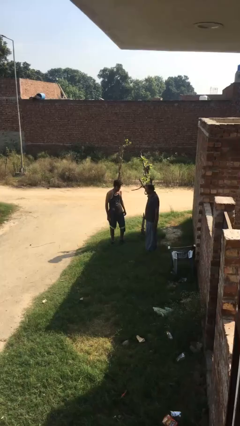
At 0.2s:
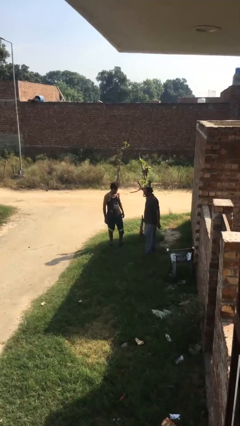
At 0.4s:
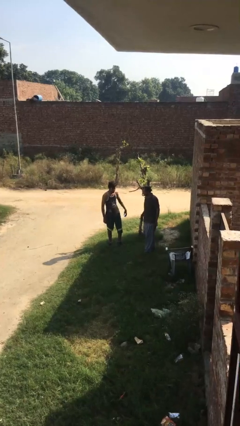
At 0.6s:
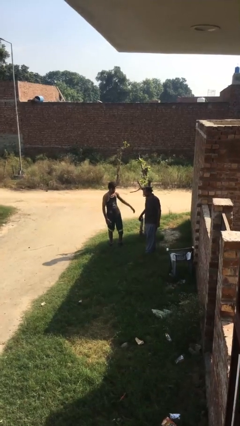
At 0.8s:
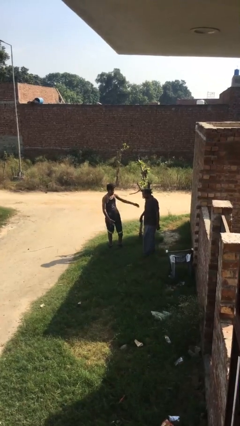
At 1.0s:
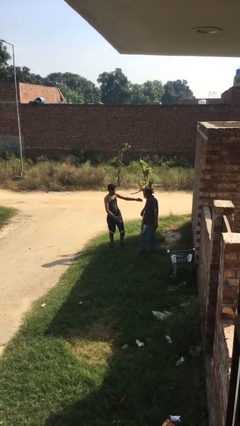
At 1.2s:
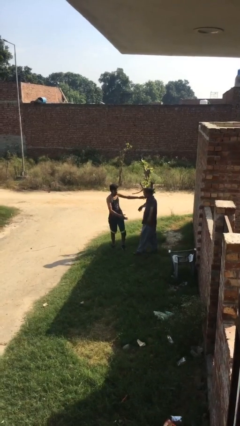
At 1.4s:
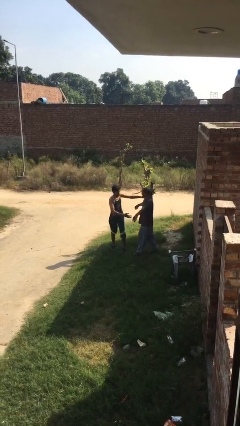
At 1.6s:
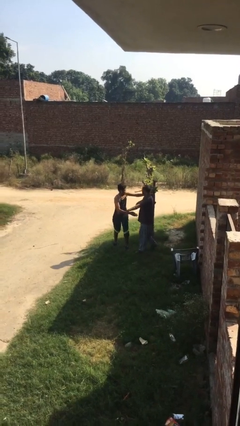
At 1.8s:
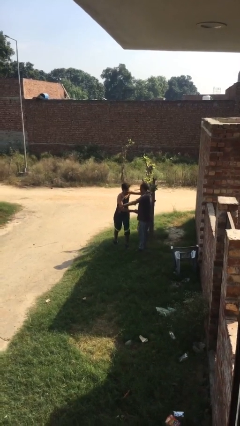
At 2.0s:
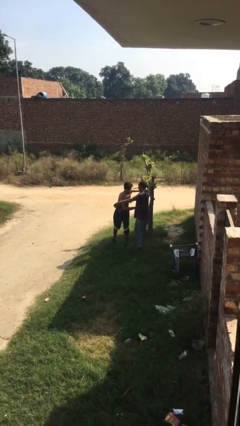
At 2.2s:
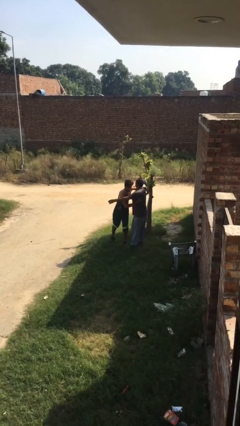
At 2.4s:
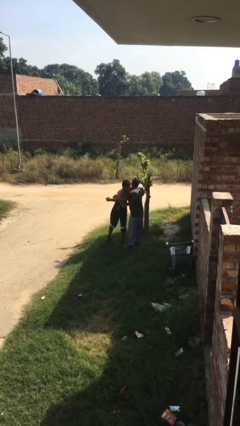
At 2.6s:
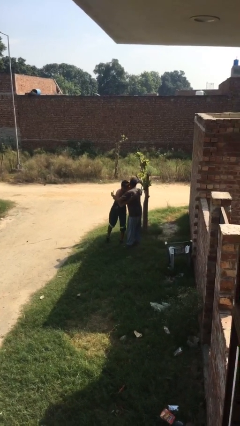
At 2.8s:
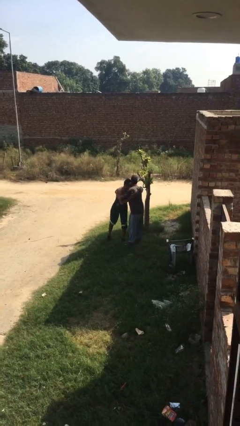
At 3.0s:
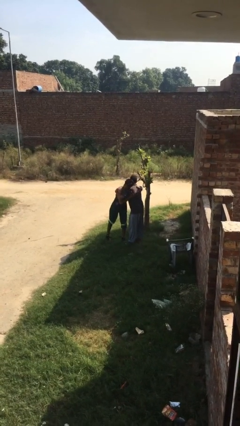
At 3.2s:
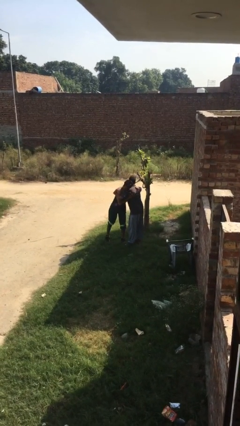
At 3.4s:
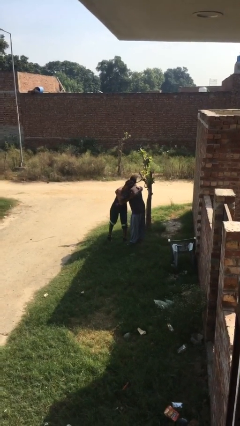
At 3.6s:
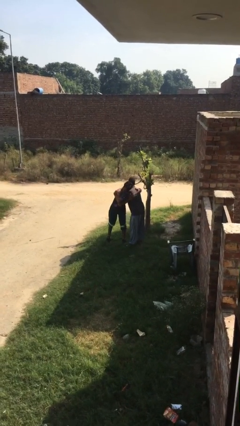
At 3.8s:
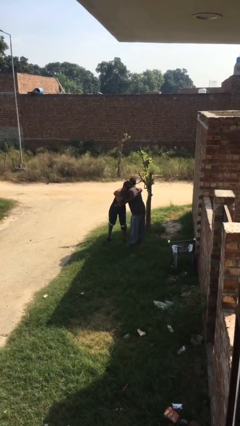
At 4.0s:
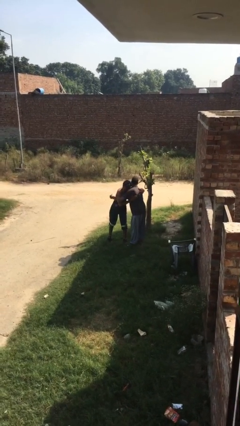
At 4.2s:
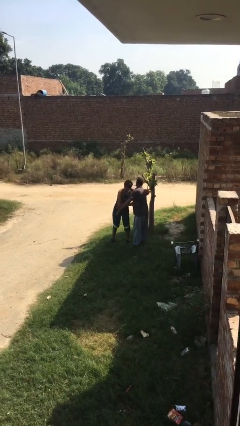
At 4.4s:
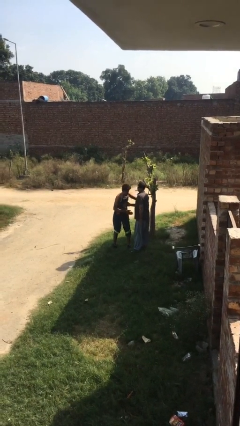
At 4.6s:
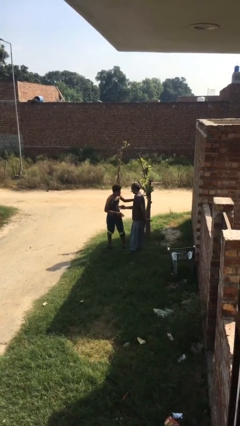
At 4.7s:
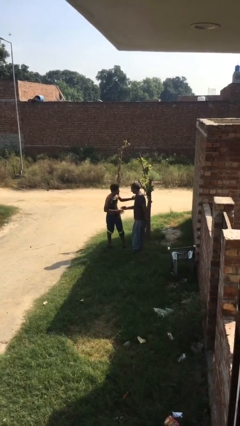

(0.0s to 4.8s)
person embraces person

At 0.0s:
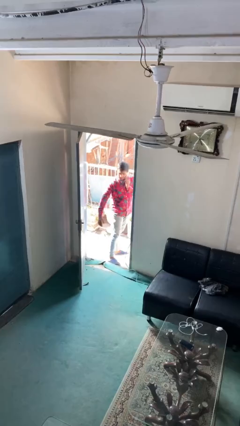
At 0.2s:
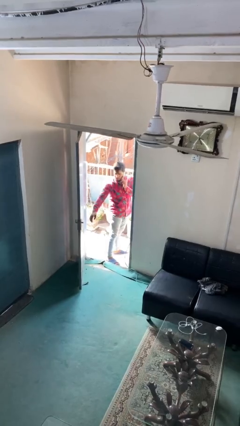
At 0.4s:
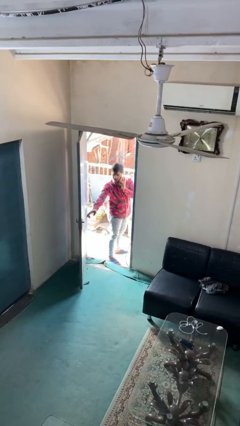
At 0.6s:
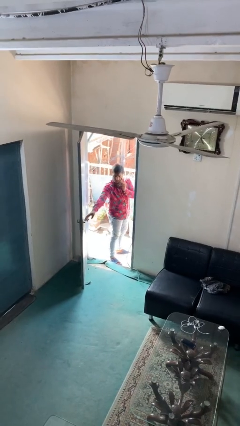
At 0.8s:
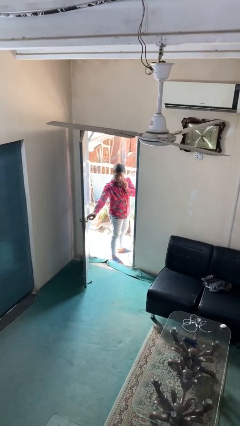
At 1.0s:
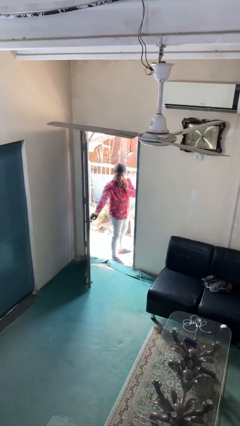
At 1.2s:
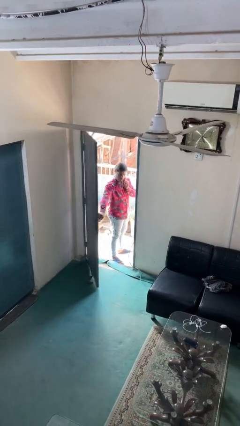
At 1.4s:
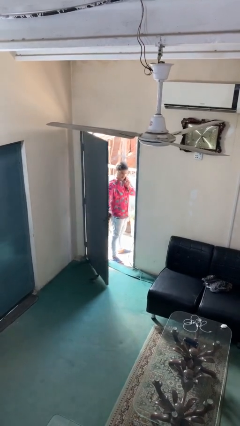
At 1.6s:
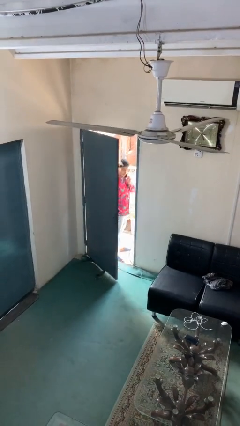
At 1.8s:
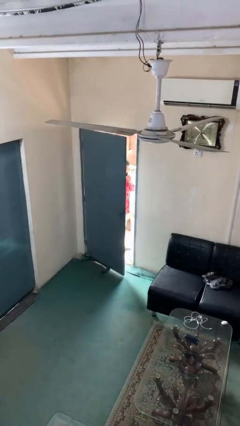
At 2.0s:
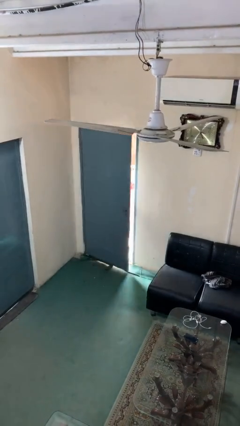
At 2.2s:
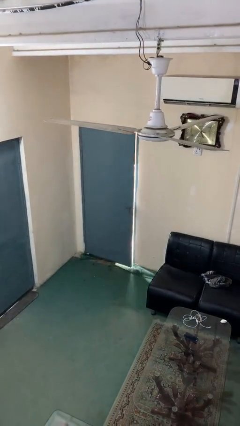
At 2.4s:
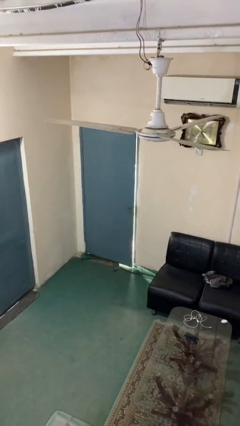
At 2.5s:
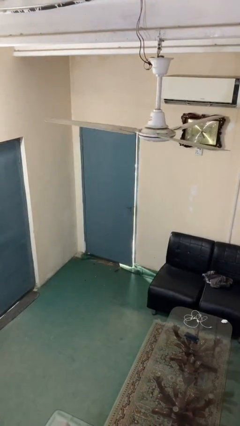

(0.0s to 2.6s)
person closes facility door

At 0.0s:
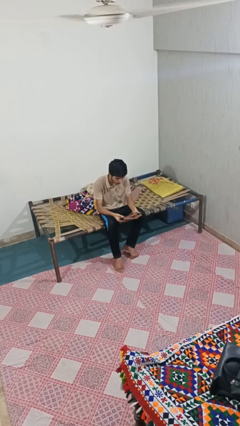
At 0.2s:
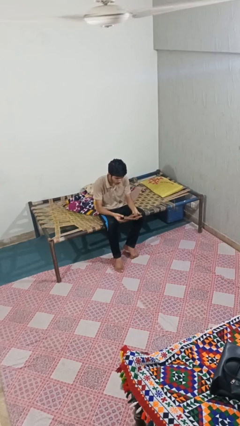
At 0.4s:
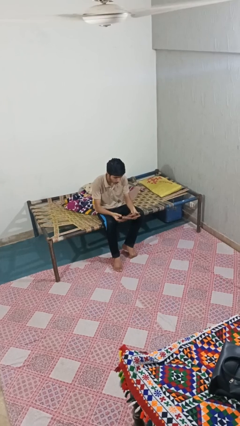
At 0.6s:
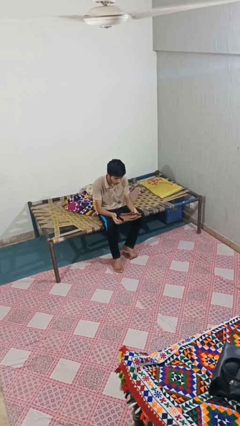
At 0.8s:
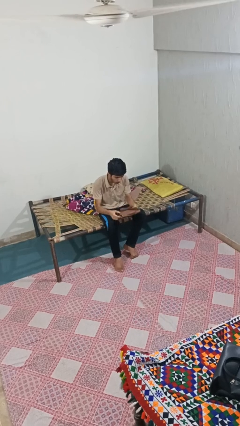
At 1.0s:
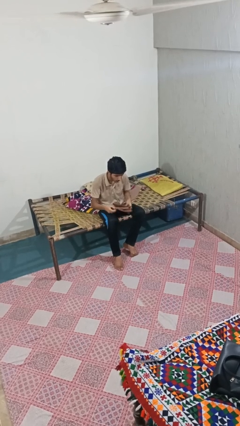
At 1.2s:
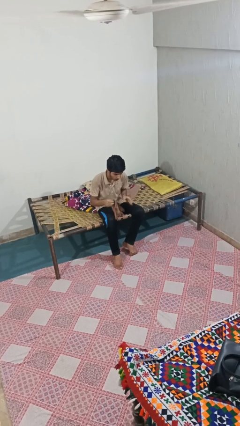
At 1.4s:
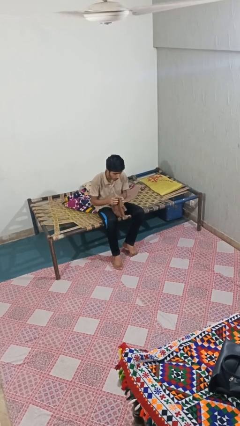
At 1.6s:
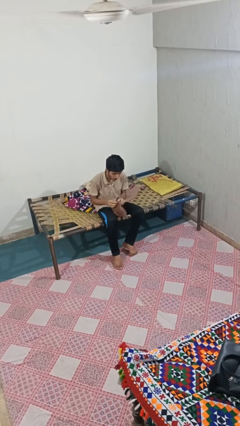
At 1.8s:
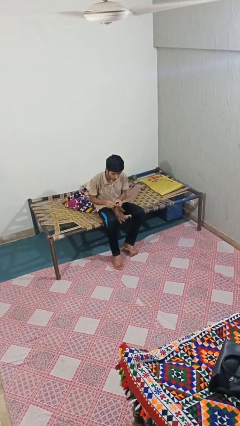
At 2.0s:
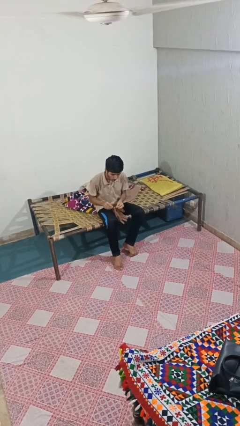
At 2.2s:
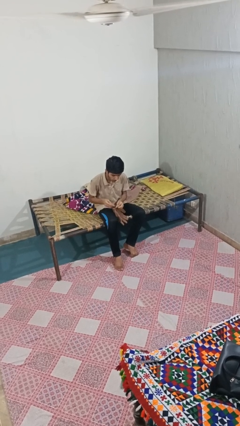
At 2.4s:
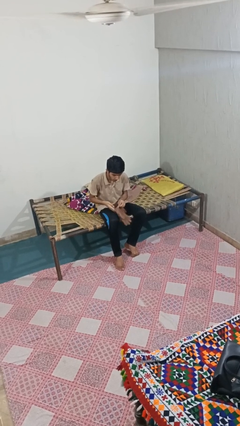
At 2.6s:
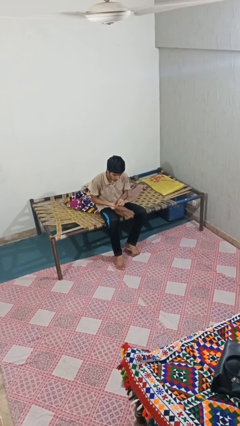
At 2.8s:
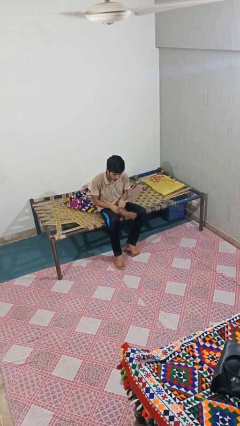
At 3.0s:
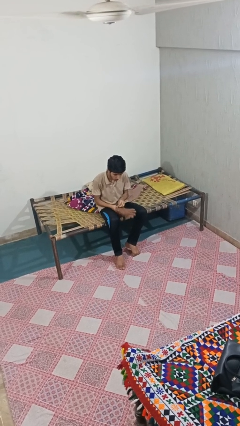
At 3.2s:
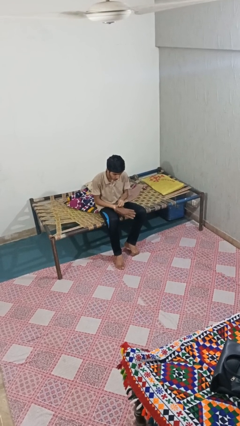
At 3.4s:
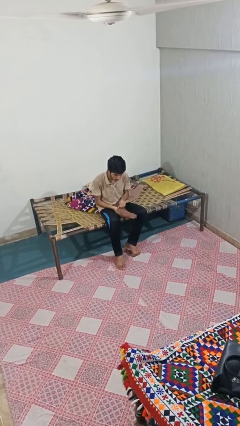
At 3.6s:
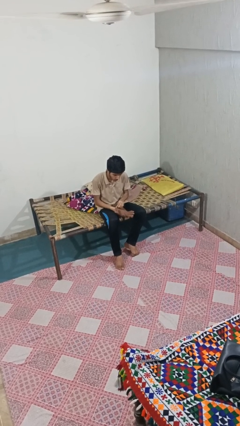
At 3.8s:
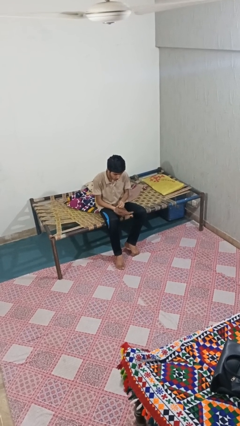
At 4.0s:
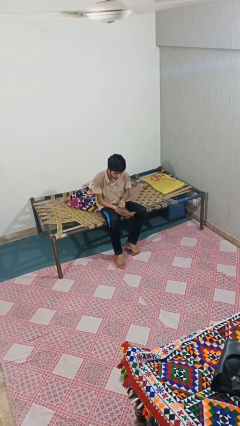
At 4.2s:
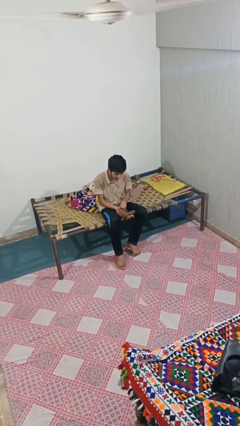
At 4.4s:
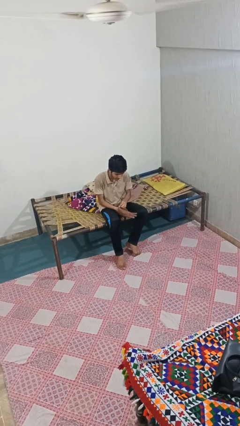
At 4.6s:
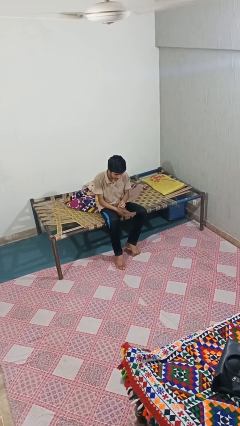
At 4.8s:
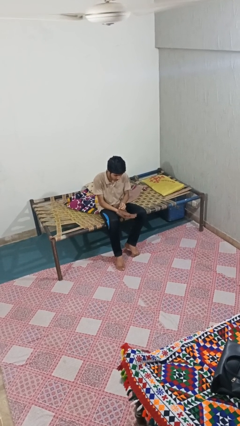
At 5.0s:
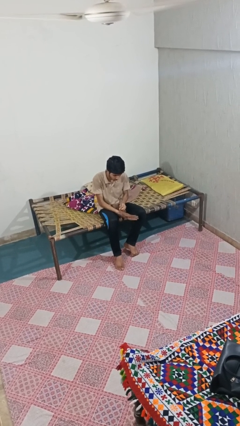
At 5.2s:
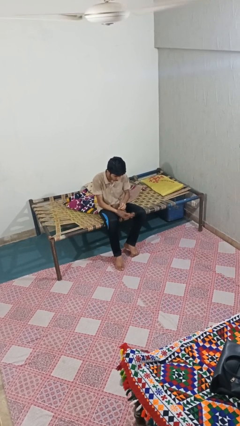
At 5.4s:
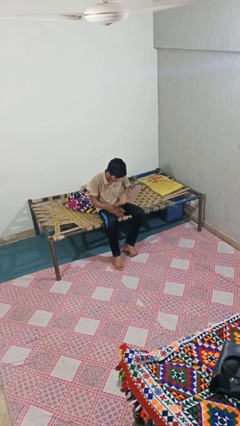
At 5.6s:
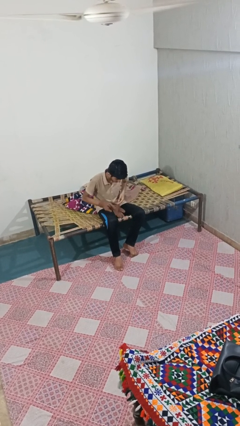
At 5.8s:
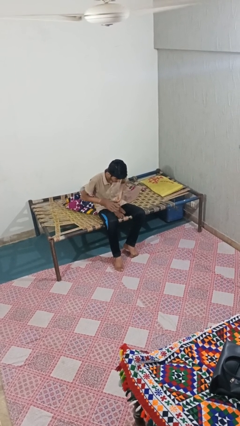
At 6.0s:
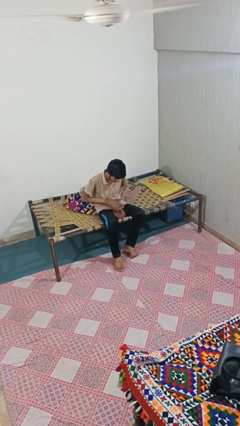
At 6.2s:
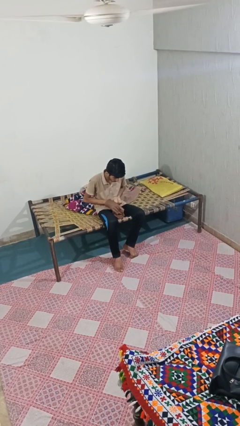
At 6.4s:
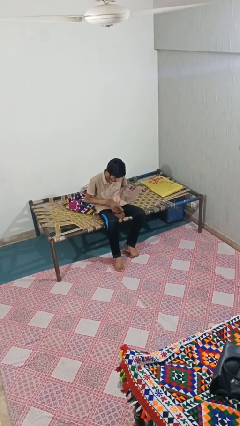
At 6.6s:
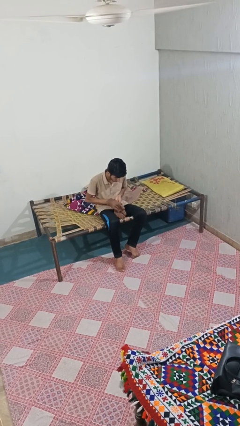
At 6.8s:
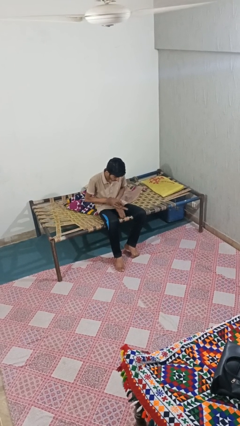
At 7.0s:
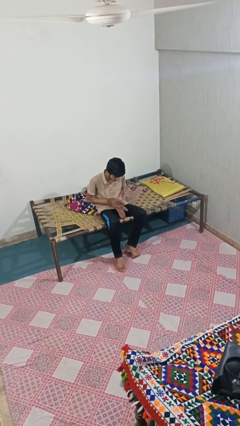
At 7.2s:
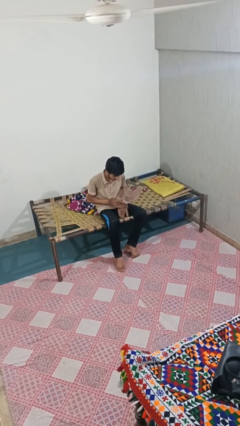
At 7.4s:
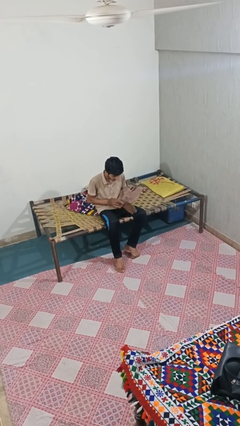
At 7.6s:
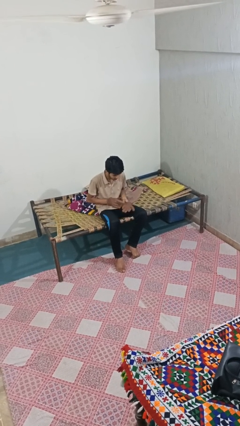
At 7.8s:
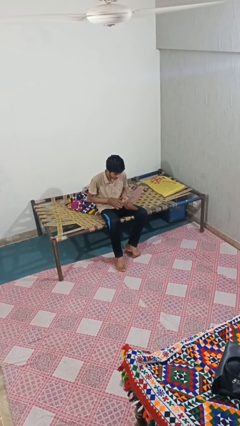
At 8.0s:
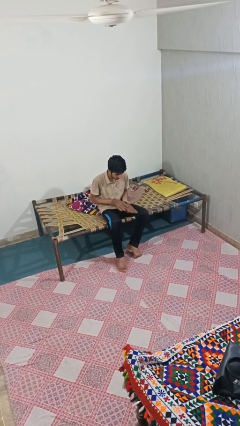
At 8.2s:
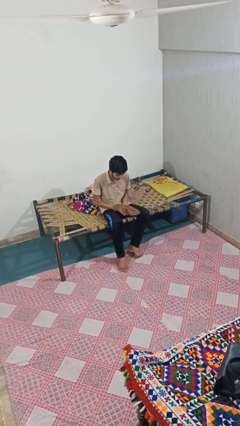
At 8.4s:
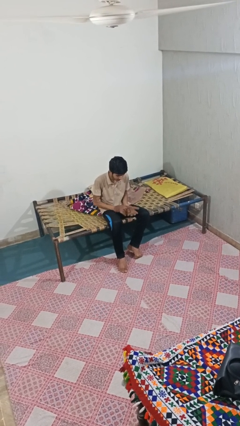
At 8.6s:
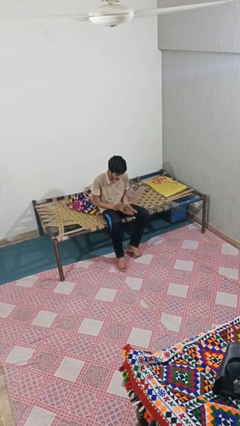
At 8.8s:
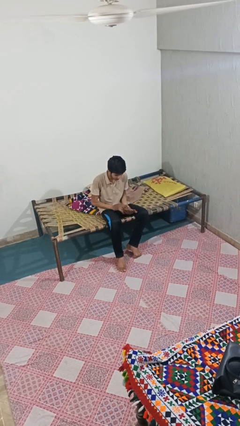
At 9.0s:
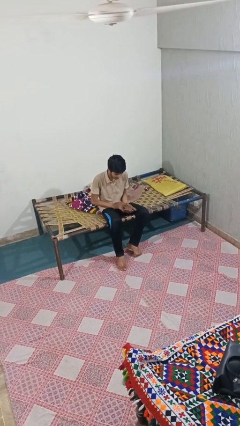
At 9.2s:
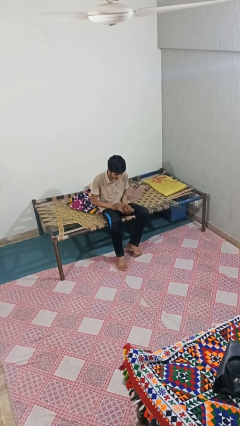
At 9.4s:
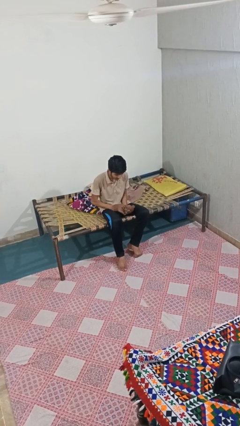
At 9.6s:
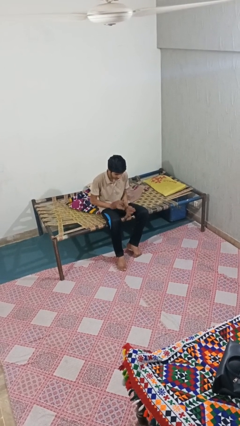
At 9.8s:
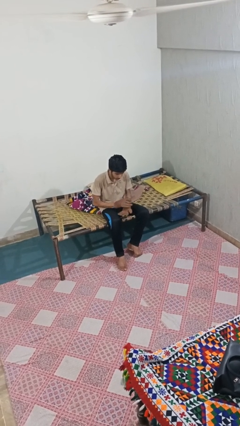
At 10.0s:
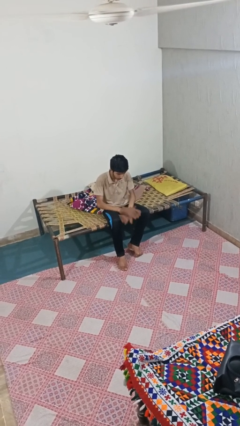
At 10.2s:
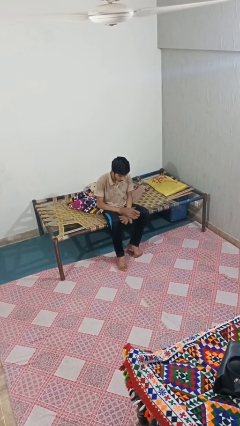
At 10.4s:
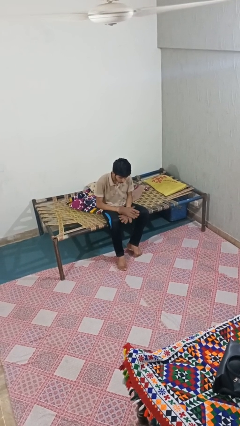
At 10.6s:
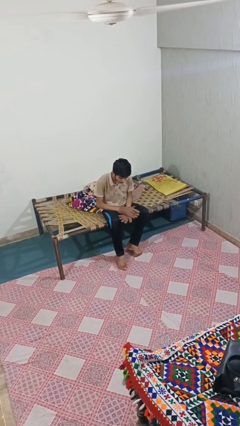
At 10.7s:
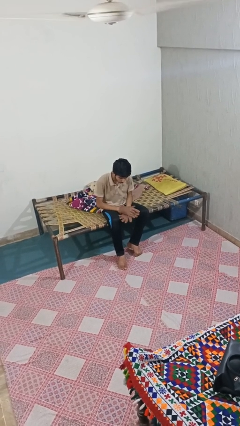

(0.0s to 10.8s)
person puts on gloves
